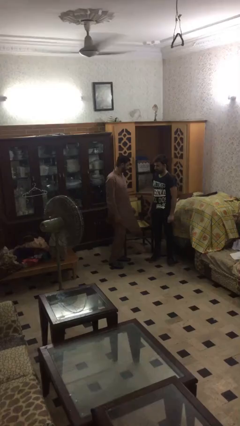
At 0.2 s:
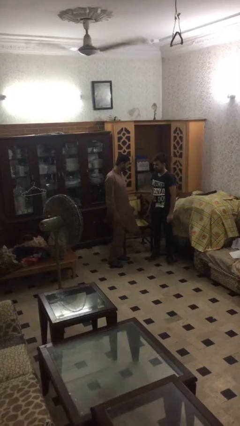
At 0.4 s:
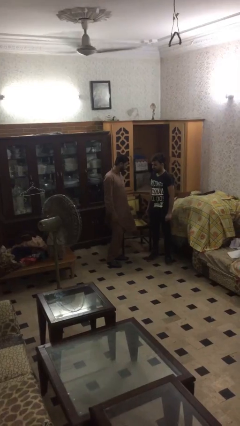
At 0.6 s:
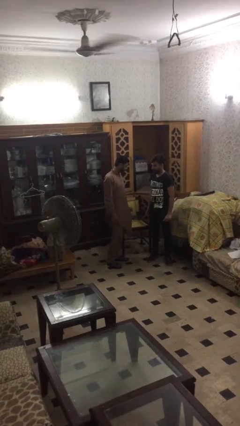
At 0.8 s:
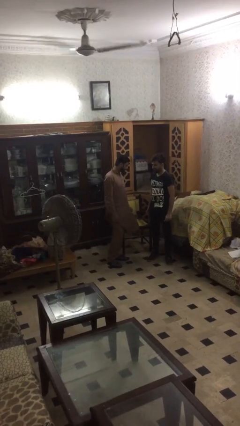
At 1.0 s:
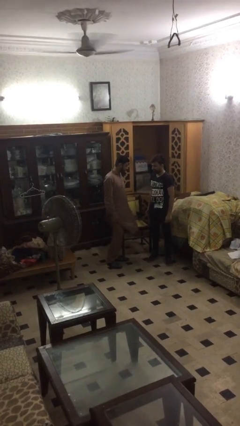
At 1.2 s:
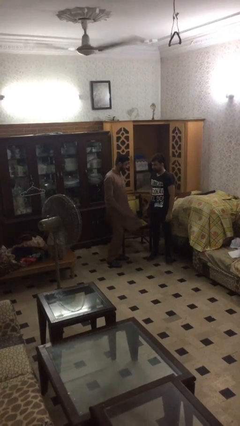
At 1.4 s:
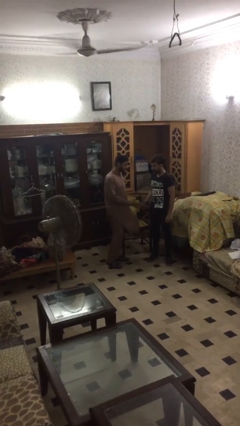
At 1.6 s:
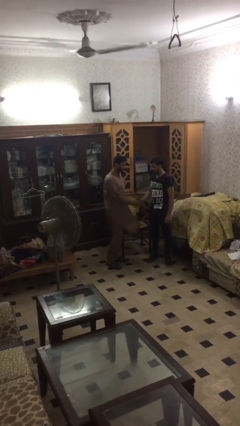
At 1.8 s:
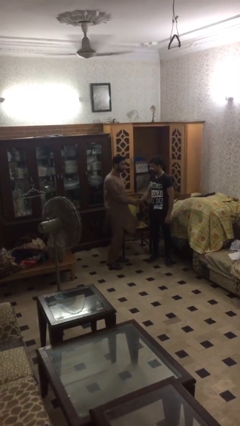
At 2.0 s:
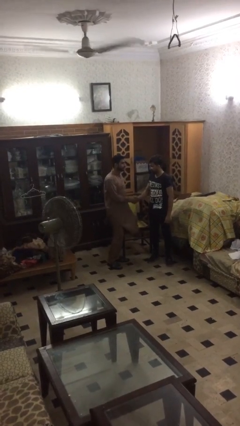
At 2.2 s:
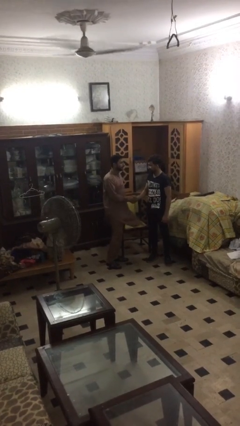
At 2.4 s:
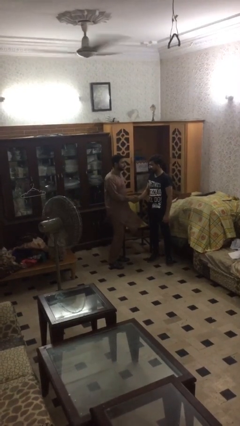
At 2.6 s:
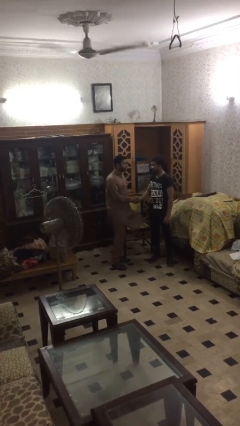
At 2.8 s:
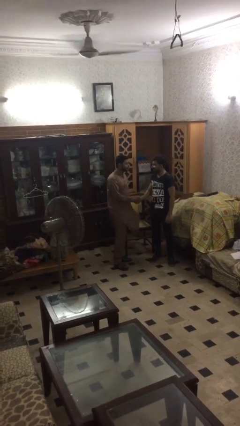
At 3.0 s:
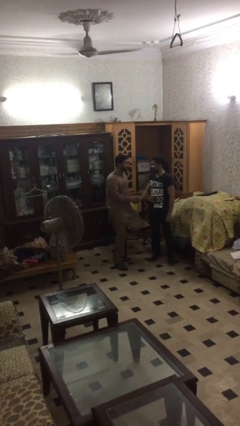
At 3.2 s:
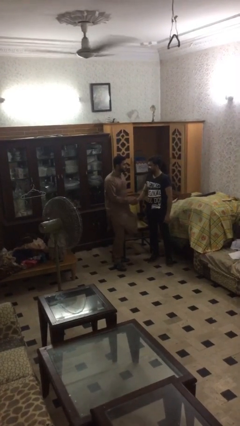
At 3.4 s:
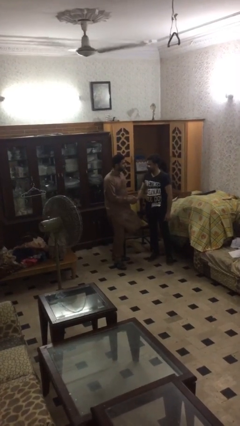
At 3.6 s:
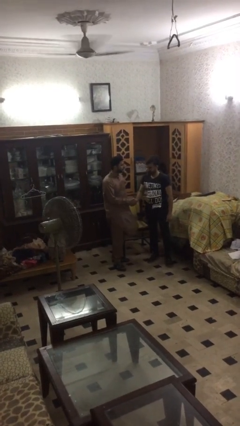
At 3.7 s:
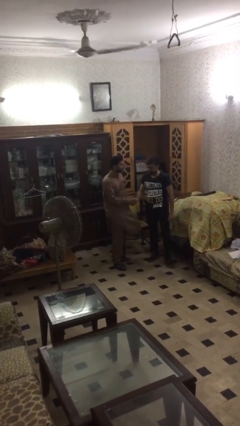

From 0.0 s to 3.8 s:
person shakes hand

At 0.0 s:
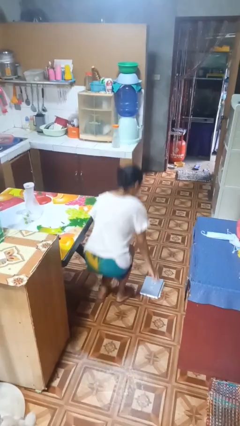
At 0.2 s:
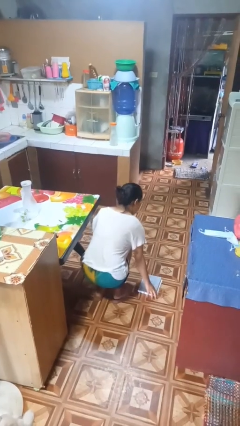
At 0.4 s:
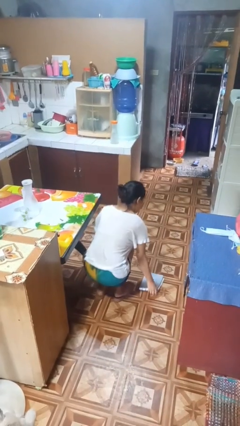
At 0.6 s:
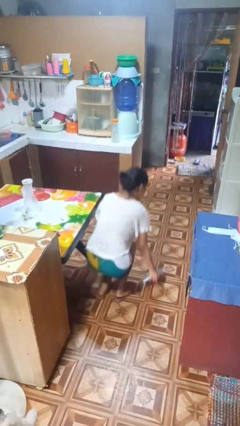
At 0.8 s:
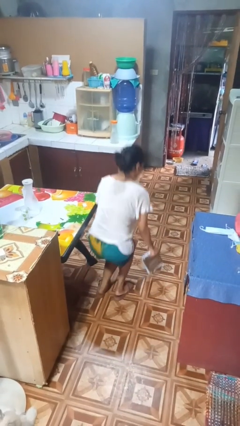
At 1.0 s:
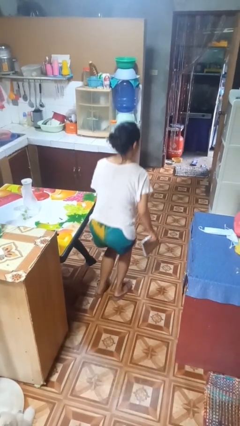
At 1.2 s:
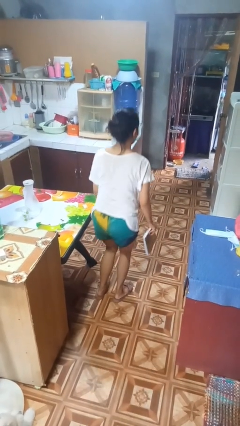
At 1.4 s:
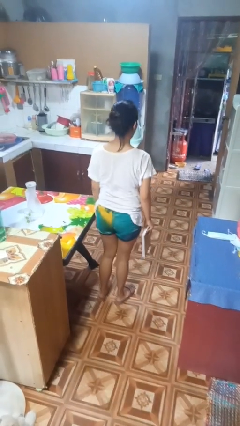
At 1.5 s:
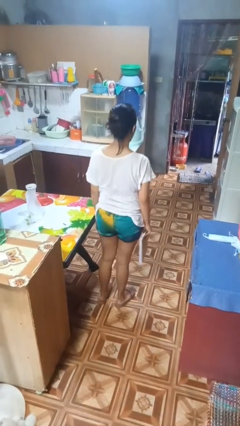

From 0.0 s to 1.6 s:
person picks up object from floor

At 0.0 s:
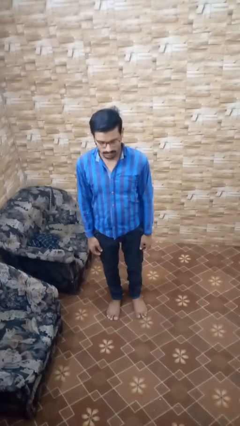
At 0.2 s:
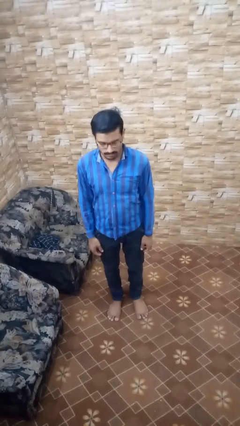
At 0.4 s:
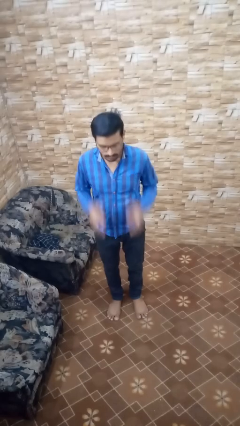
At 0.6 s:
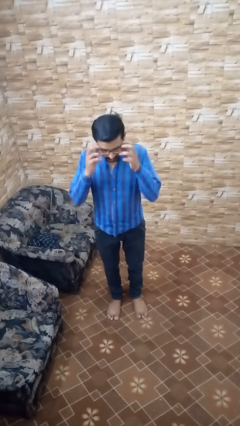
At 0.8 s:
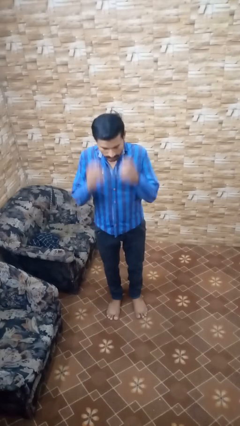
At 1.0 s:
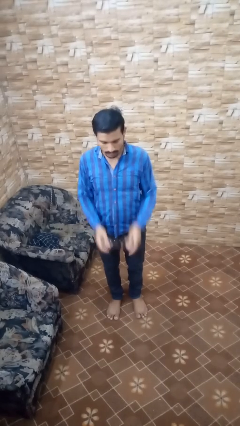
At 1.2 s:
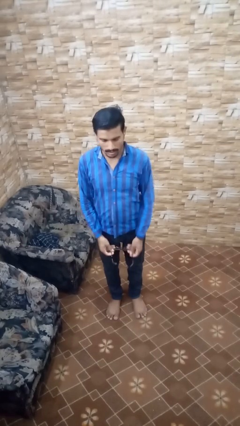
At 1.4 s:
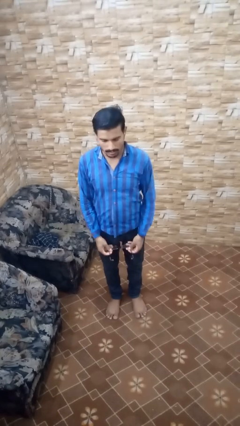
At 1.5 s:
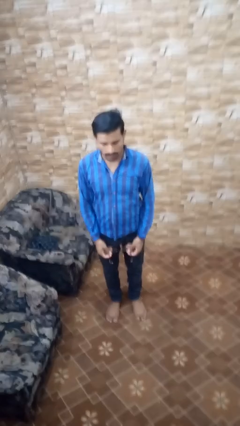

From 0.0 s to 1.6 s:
person takes off glasses

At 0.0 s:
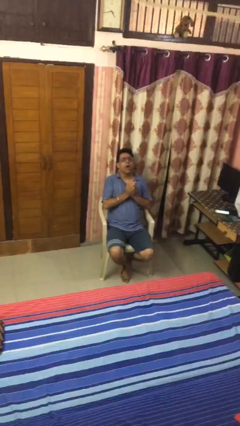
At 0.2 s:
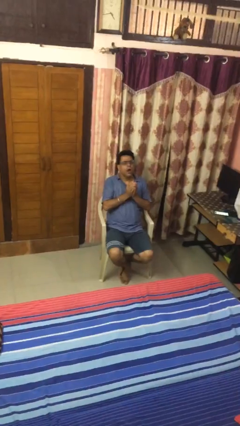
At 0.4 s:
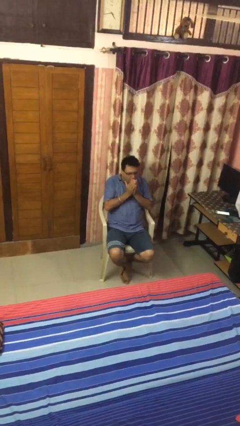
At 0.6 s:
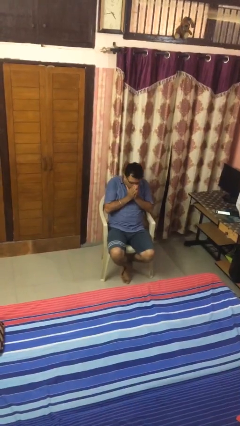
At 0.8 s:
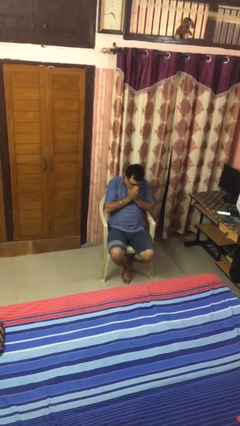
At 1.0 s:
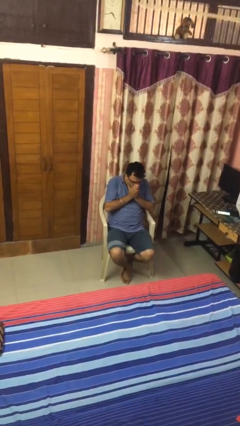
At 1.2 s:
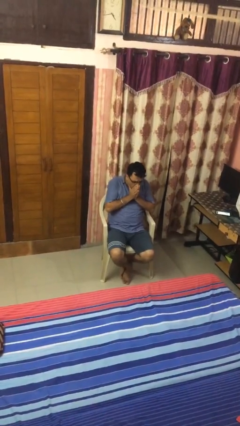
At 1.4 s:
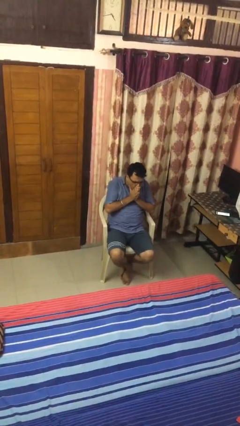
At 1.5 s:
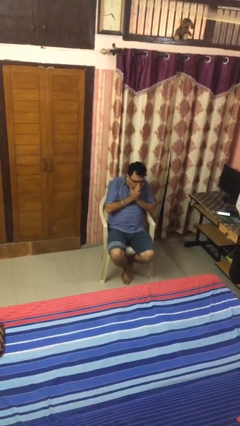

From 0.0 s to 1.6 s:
person sneezes into hand

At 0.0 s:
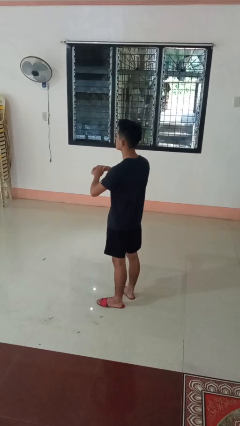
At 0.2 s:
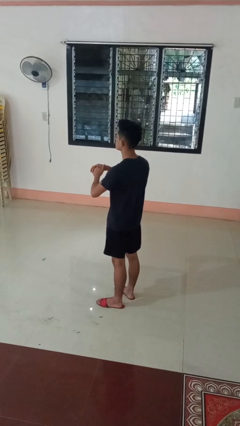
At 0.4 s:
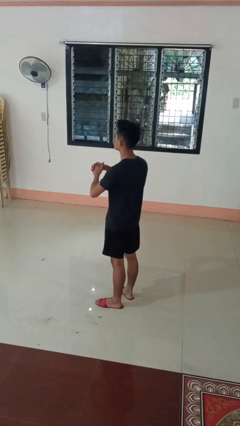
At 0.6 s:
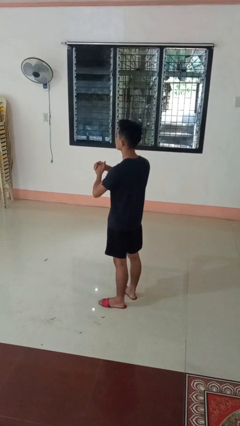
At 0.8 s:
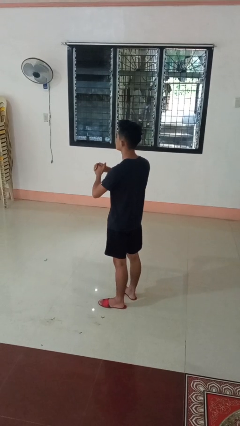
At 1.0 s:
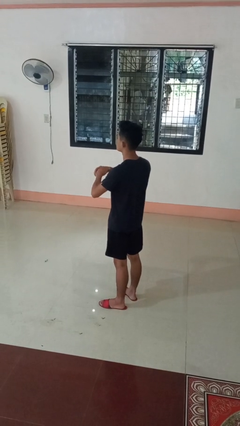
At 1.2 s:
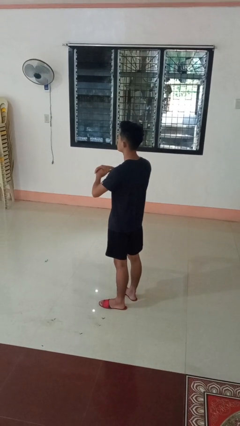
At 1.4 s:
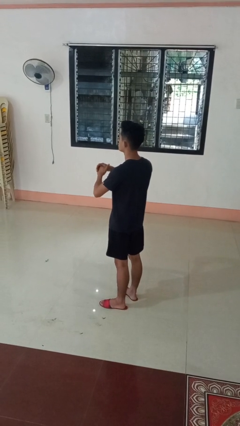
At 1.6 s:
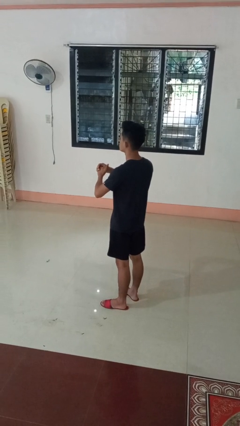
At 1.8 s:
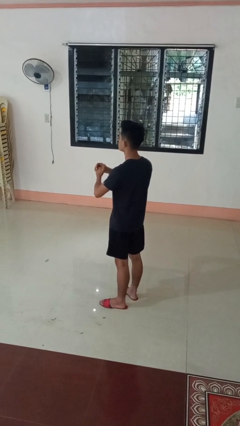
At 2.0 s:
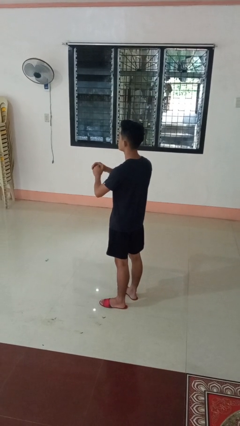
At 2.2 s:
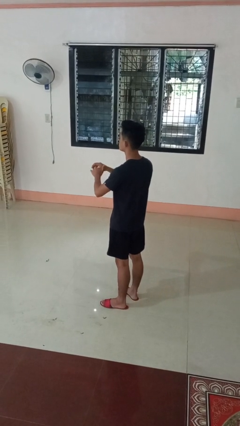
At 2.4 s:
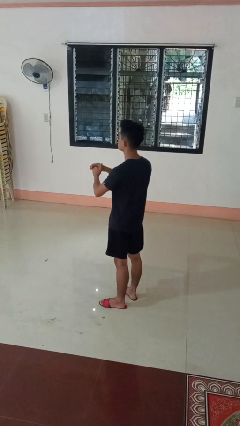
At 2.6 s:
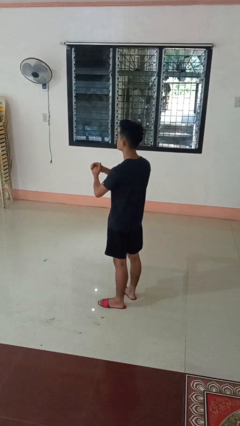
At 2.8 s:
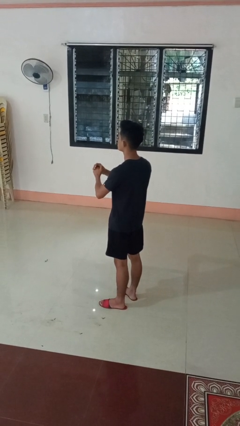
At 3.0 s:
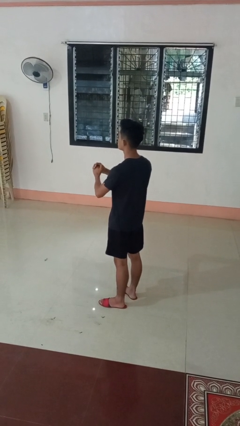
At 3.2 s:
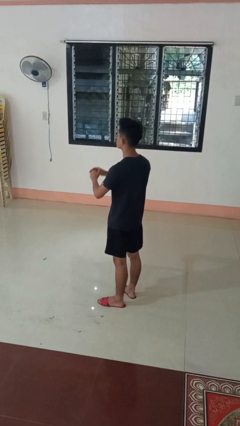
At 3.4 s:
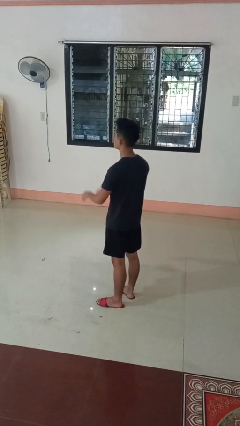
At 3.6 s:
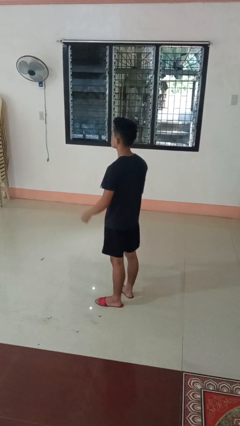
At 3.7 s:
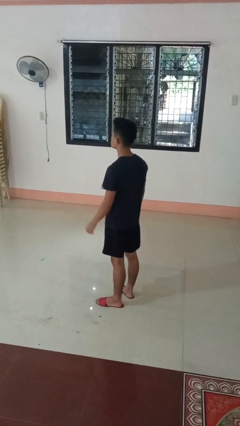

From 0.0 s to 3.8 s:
person cracks knuckles

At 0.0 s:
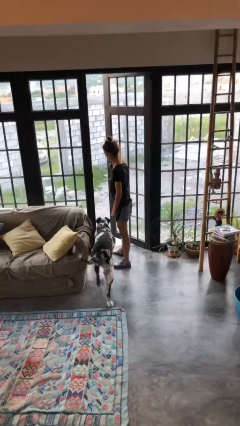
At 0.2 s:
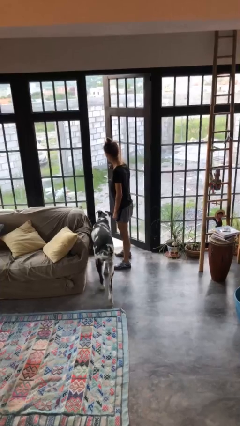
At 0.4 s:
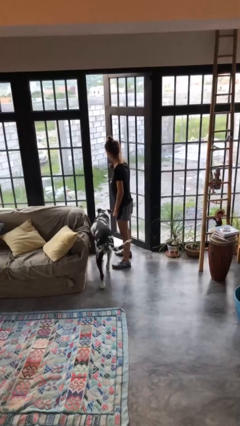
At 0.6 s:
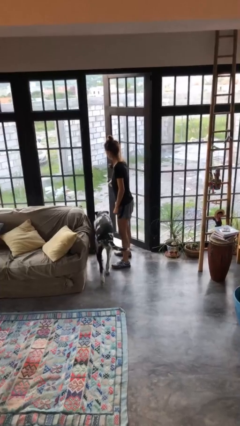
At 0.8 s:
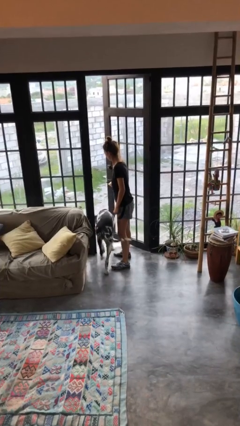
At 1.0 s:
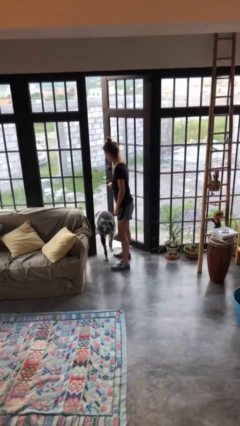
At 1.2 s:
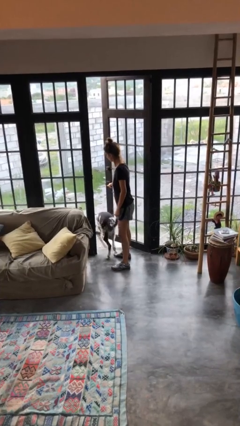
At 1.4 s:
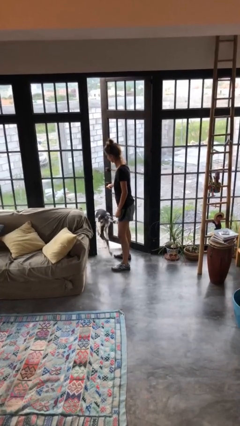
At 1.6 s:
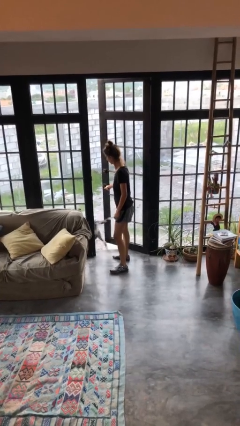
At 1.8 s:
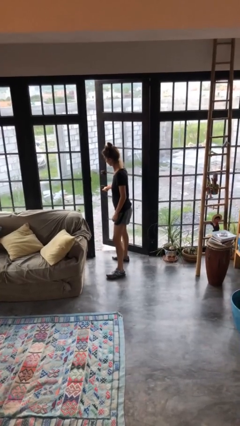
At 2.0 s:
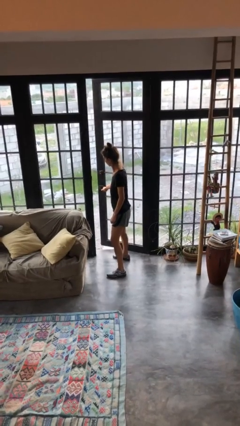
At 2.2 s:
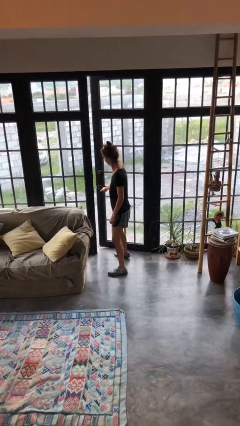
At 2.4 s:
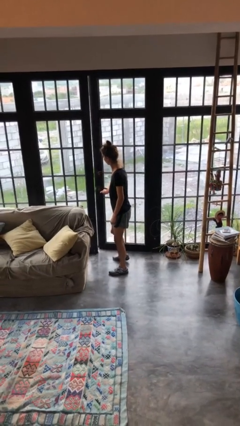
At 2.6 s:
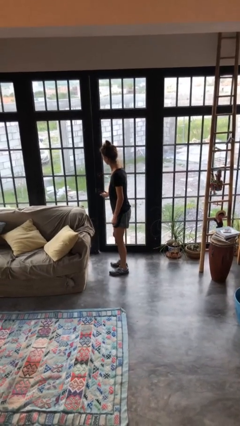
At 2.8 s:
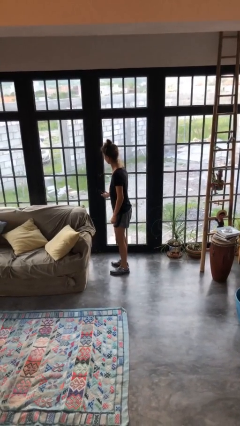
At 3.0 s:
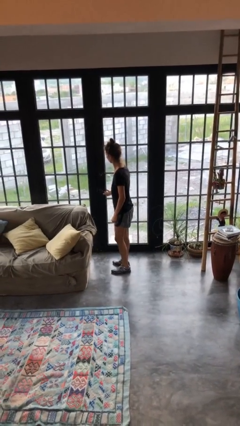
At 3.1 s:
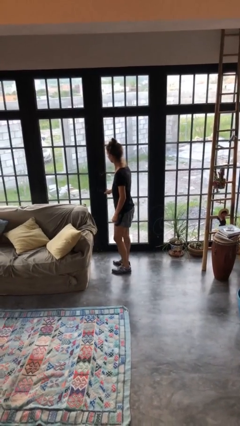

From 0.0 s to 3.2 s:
person closes facility door

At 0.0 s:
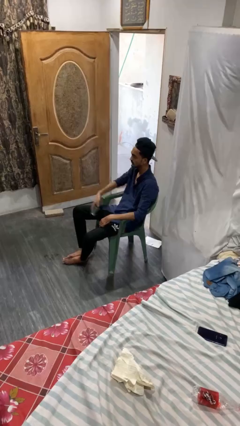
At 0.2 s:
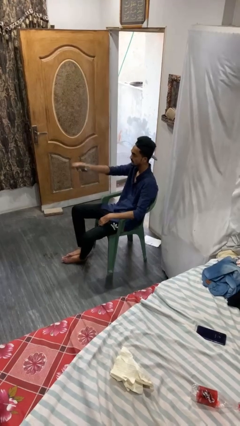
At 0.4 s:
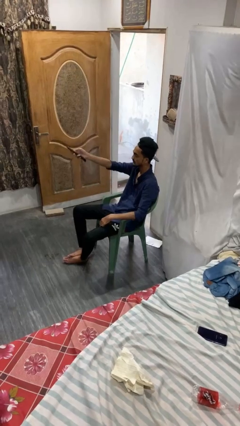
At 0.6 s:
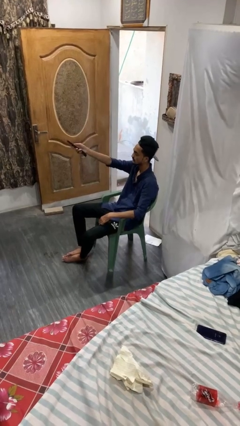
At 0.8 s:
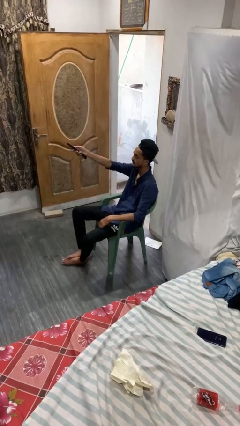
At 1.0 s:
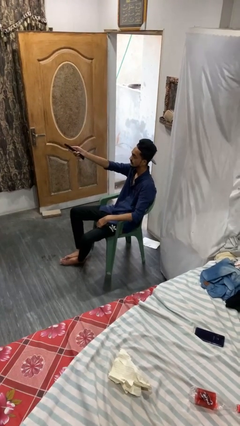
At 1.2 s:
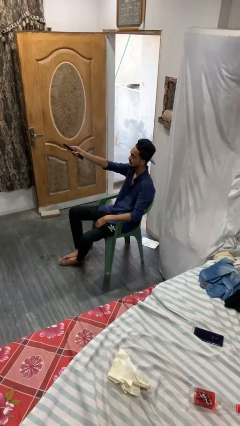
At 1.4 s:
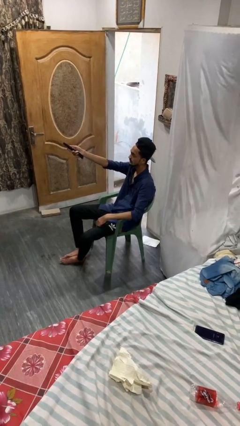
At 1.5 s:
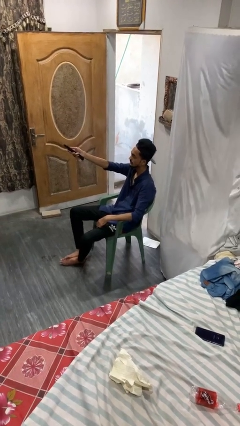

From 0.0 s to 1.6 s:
person uses television remote
